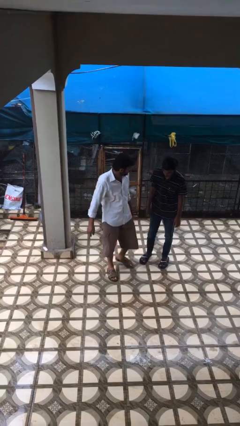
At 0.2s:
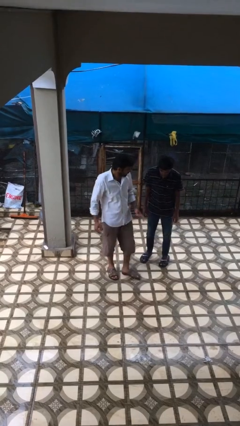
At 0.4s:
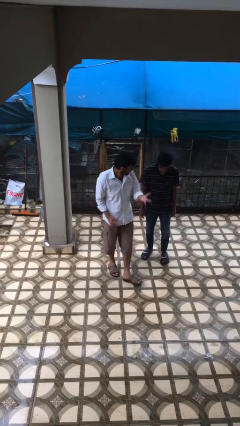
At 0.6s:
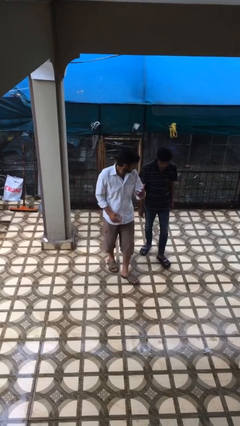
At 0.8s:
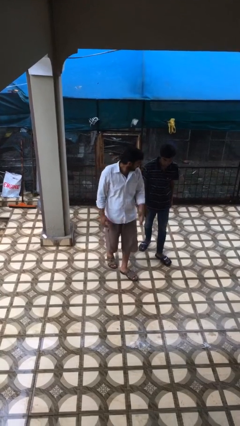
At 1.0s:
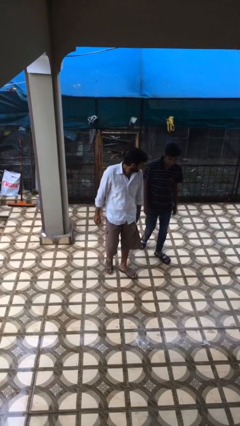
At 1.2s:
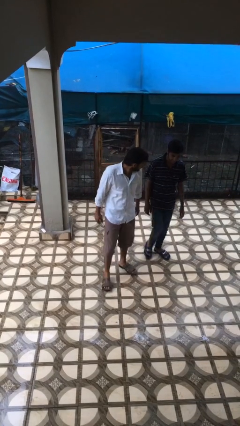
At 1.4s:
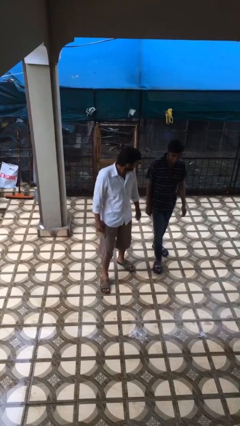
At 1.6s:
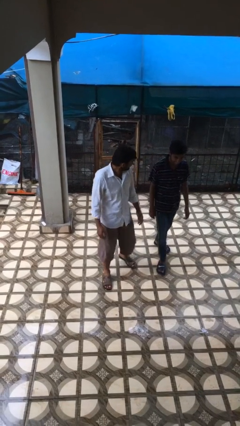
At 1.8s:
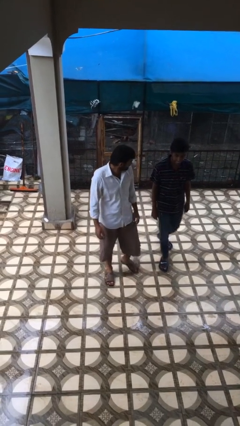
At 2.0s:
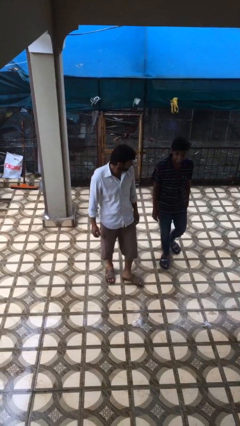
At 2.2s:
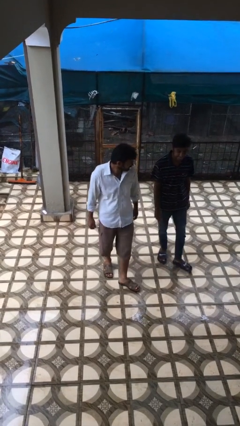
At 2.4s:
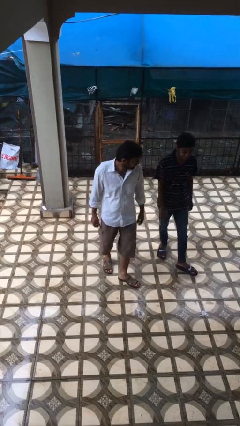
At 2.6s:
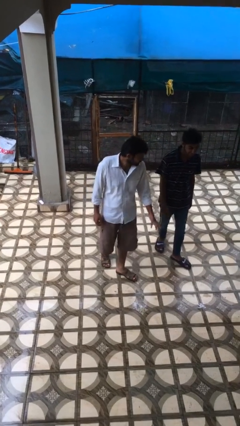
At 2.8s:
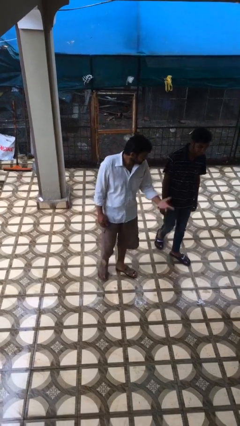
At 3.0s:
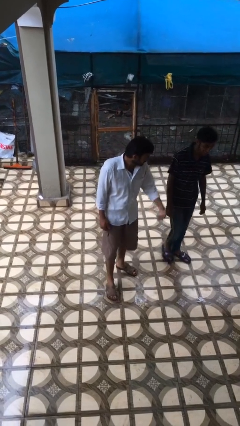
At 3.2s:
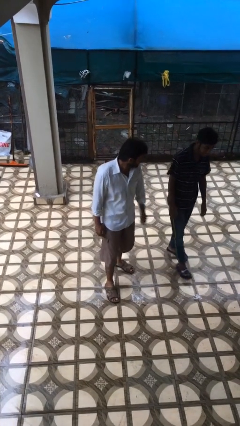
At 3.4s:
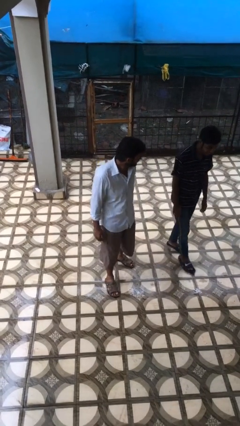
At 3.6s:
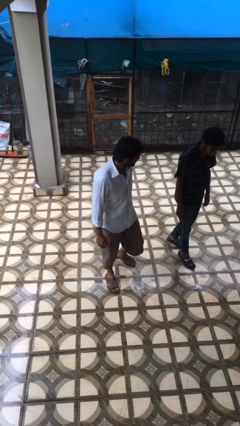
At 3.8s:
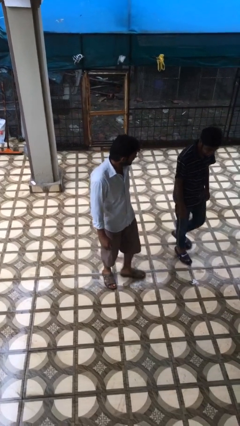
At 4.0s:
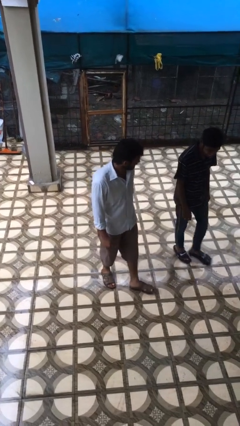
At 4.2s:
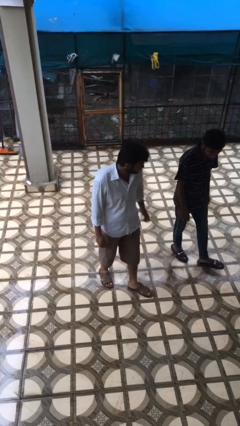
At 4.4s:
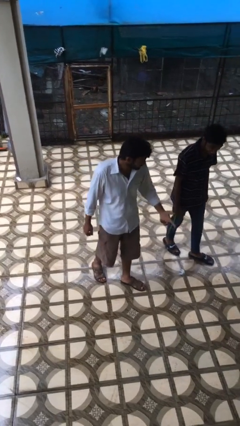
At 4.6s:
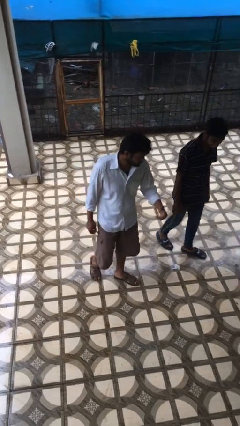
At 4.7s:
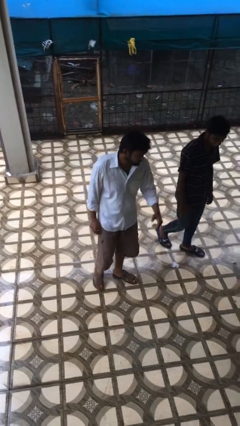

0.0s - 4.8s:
person talks to person

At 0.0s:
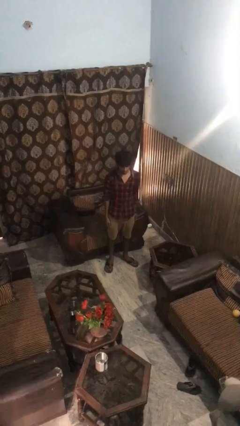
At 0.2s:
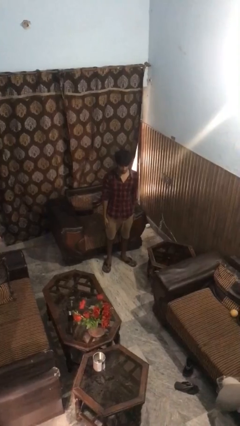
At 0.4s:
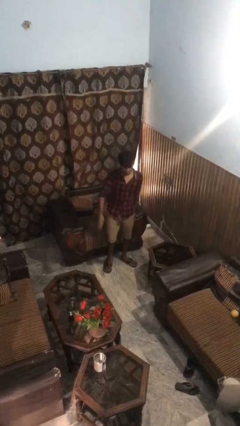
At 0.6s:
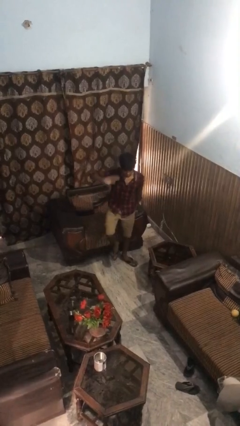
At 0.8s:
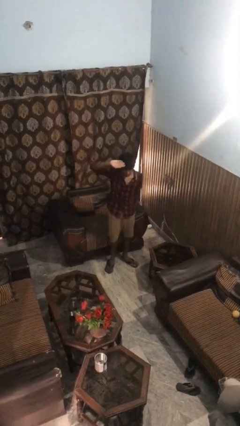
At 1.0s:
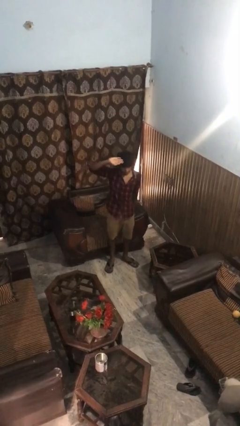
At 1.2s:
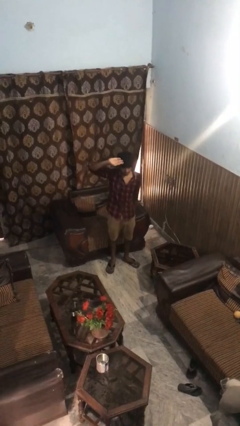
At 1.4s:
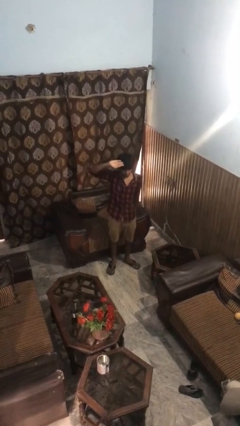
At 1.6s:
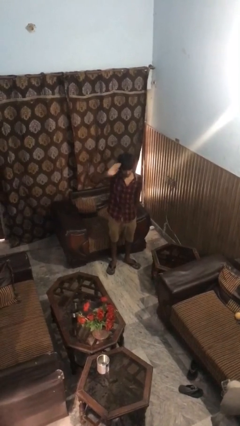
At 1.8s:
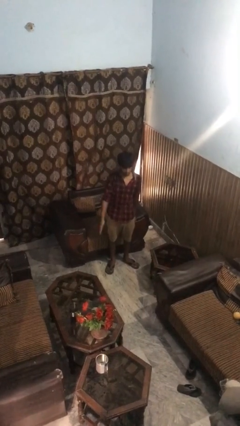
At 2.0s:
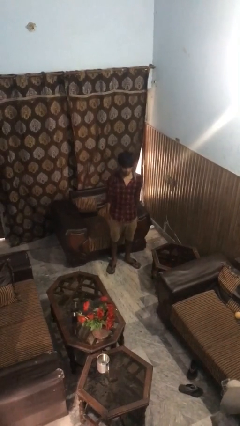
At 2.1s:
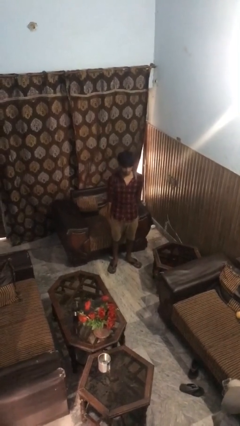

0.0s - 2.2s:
person salutes

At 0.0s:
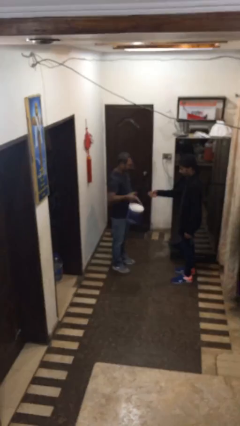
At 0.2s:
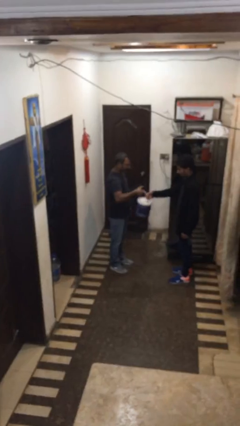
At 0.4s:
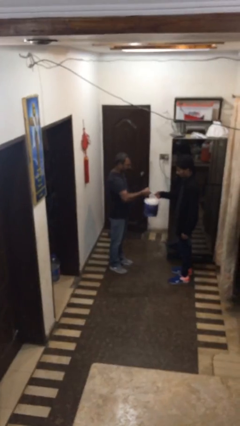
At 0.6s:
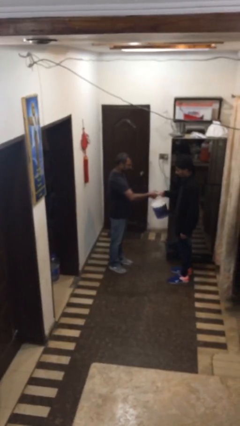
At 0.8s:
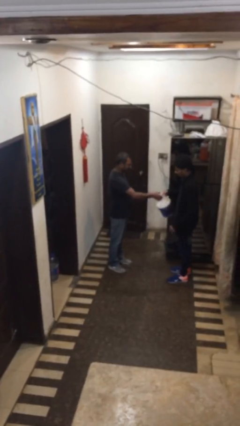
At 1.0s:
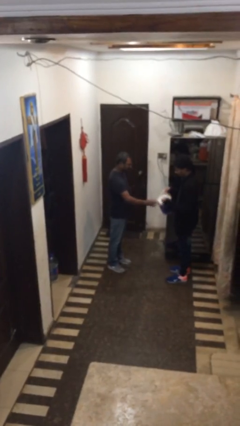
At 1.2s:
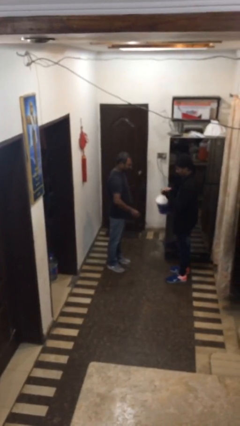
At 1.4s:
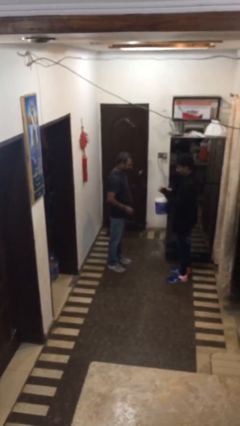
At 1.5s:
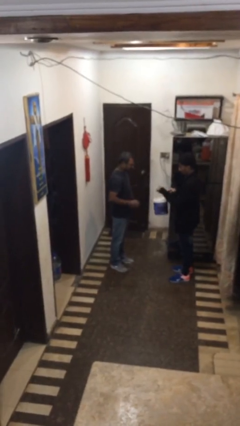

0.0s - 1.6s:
person transfers object to person

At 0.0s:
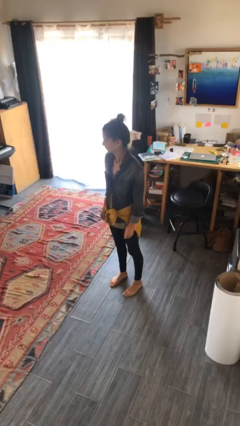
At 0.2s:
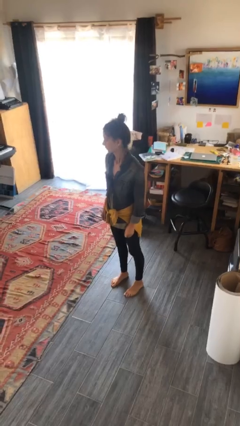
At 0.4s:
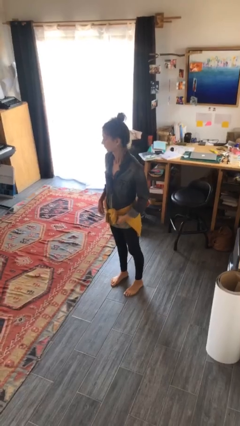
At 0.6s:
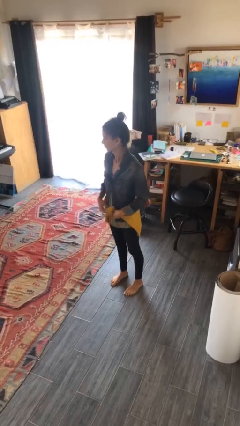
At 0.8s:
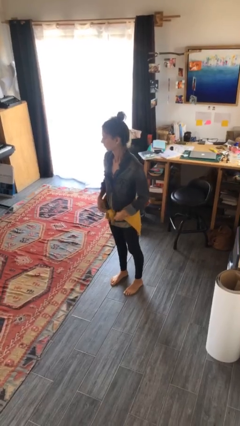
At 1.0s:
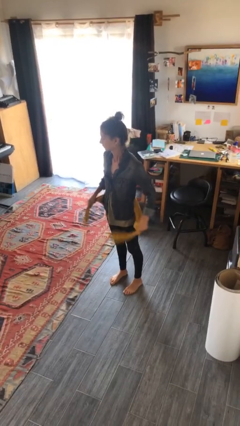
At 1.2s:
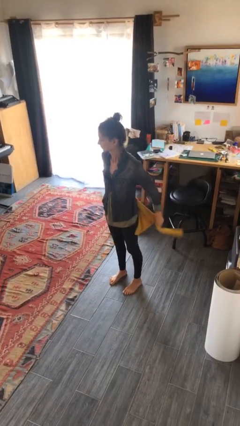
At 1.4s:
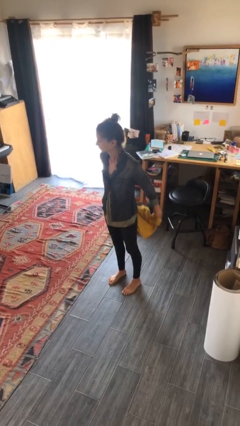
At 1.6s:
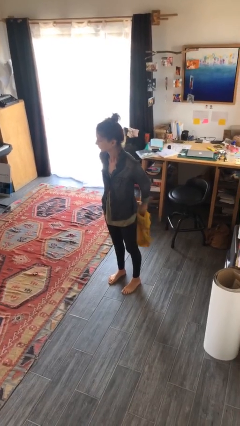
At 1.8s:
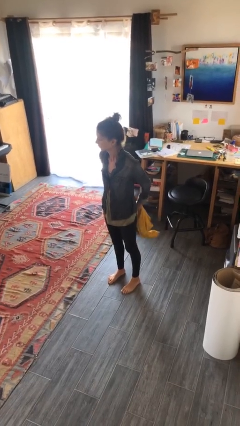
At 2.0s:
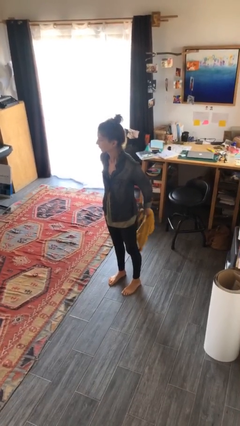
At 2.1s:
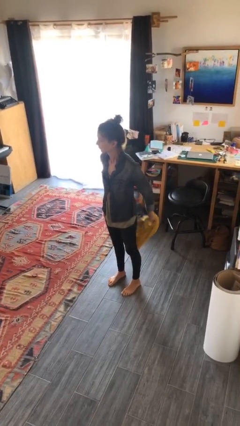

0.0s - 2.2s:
person unties jacket around waist

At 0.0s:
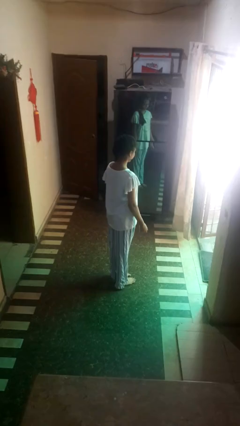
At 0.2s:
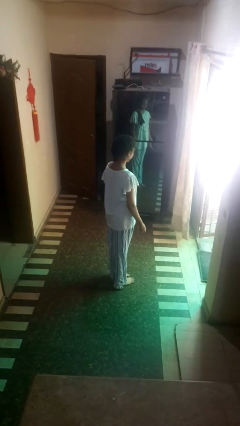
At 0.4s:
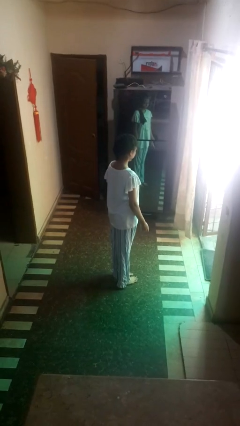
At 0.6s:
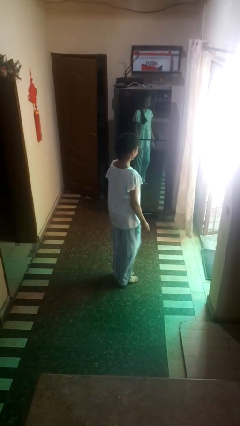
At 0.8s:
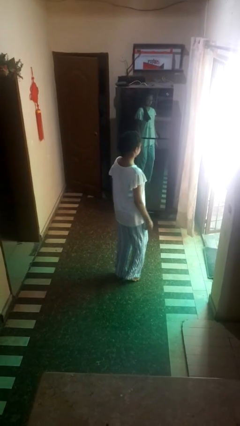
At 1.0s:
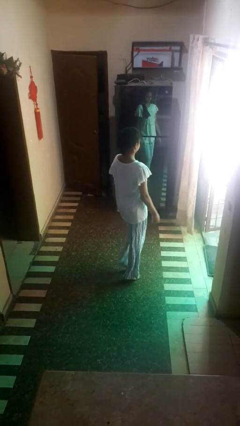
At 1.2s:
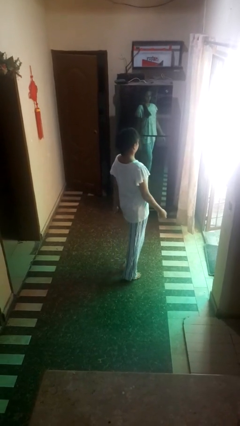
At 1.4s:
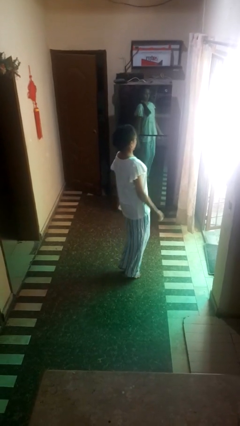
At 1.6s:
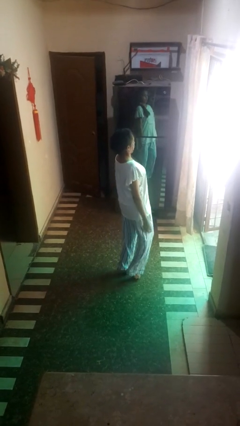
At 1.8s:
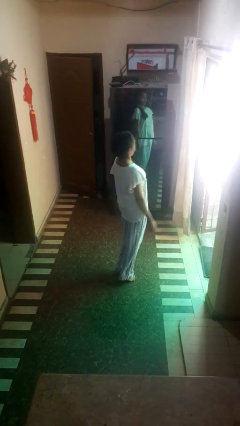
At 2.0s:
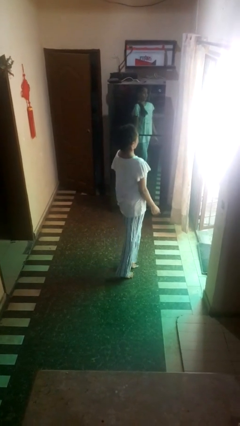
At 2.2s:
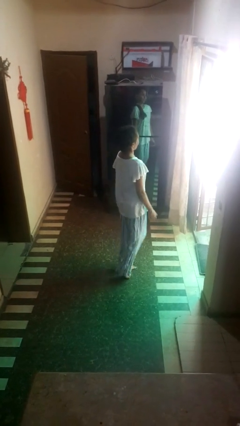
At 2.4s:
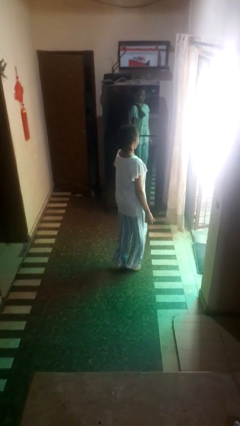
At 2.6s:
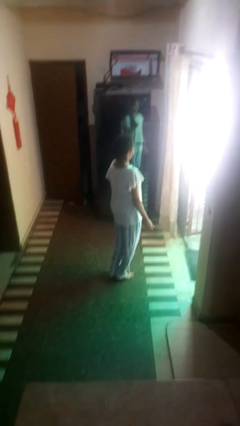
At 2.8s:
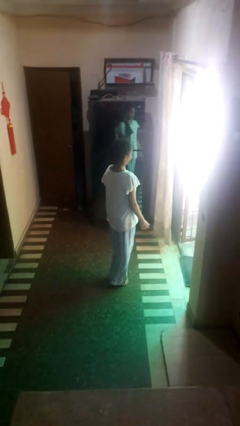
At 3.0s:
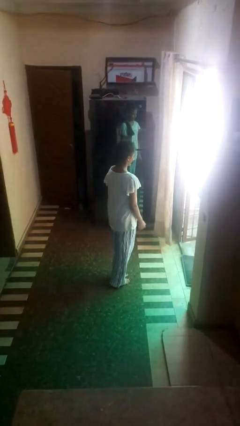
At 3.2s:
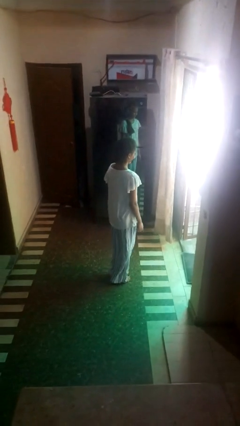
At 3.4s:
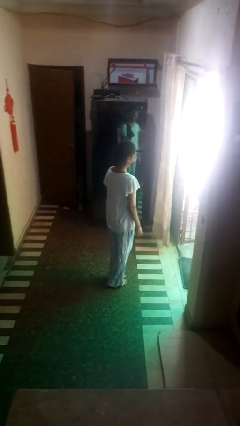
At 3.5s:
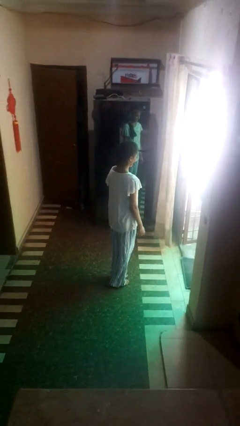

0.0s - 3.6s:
person walks tiptoe

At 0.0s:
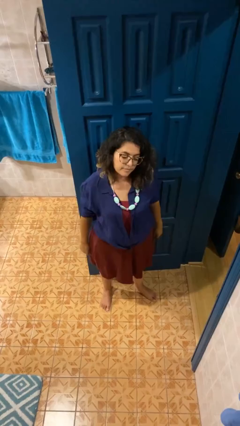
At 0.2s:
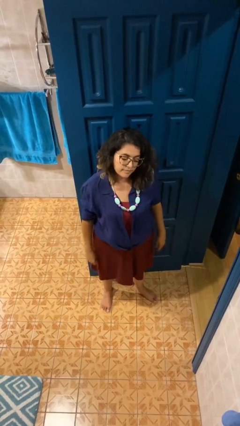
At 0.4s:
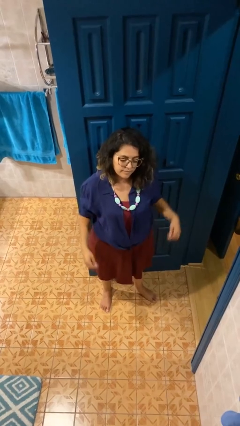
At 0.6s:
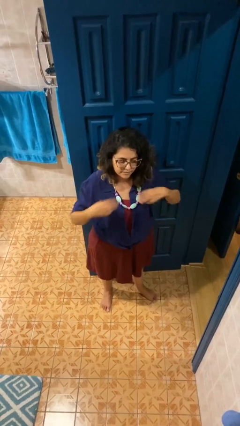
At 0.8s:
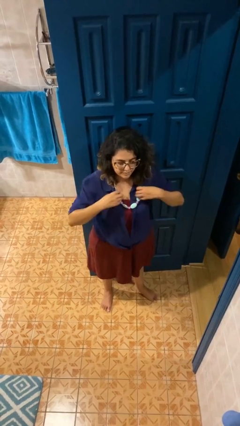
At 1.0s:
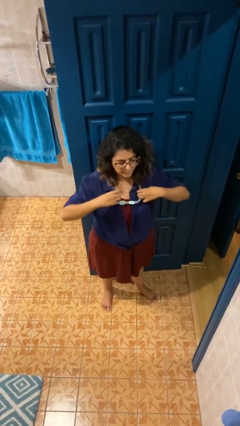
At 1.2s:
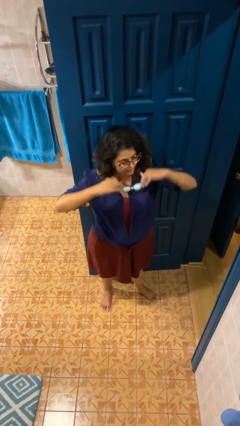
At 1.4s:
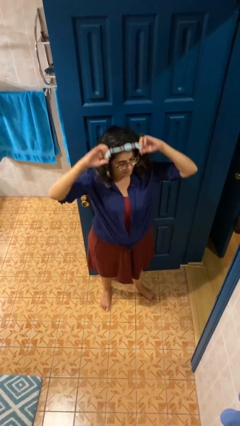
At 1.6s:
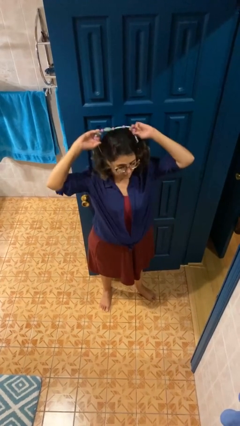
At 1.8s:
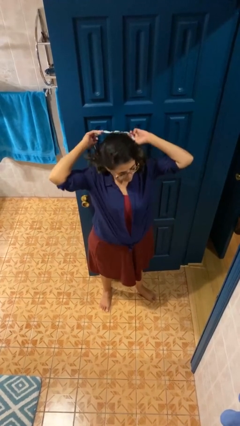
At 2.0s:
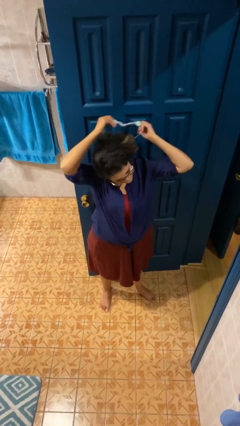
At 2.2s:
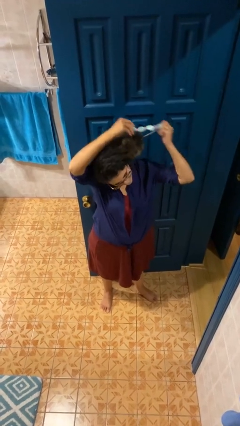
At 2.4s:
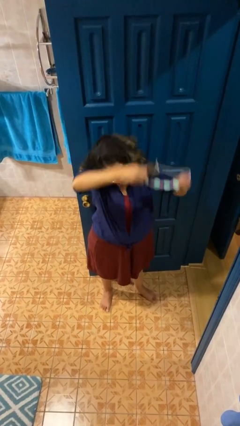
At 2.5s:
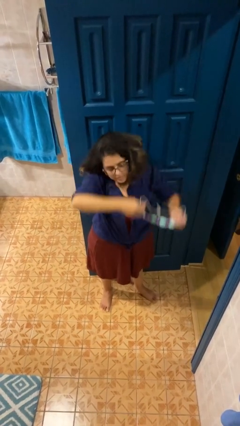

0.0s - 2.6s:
person takes off necklace
